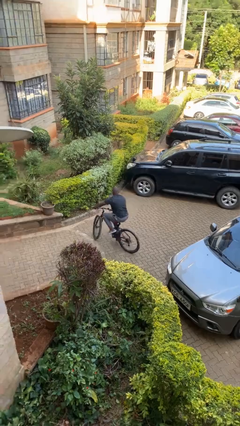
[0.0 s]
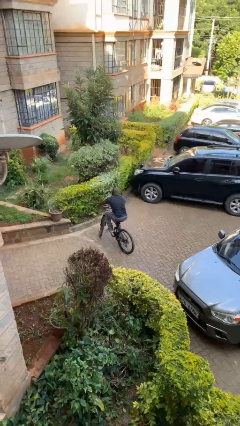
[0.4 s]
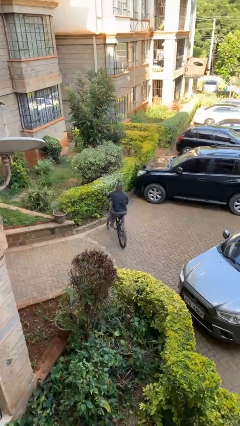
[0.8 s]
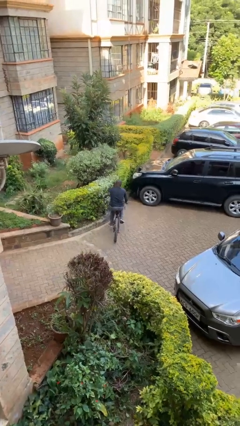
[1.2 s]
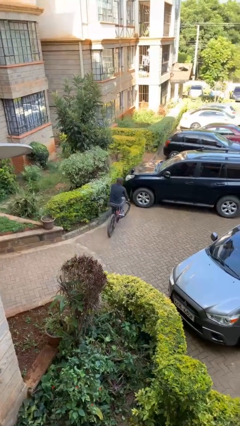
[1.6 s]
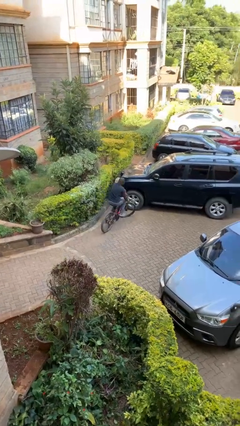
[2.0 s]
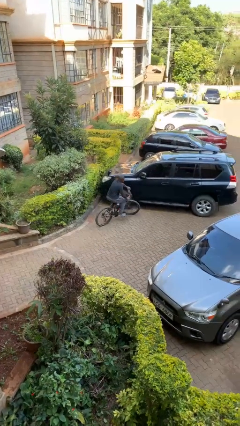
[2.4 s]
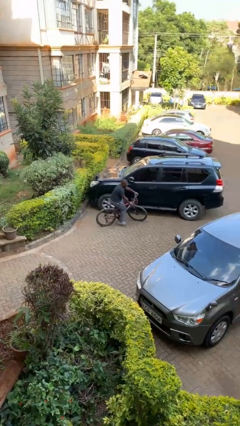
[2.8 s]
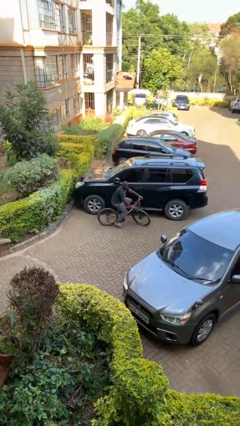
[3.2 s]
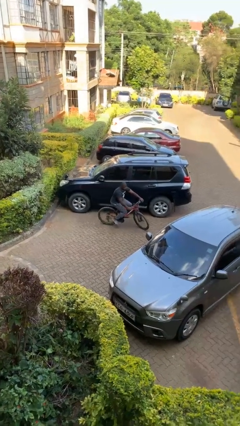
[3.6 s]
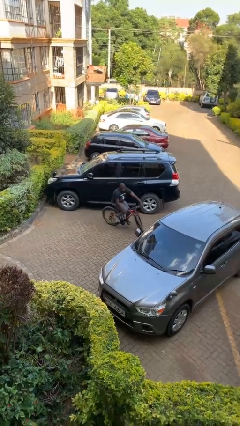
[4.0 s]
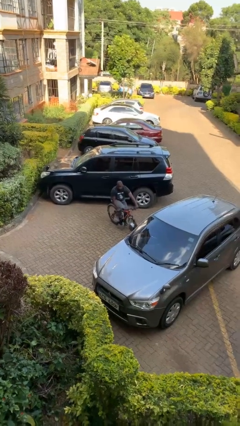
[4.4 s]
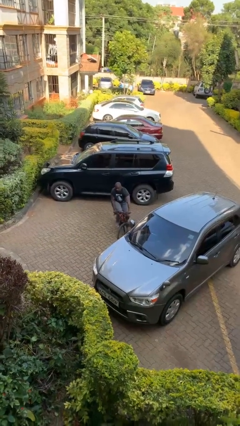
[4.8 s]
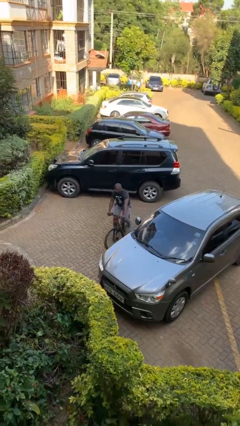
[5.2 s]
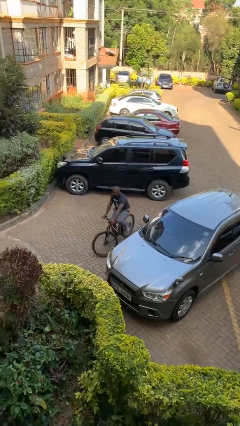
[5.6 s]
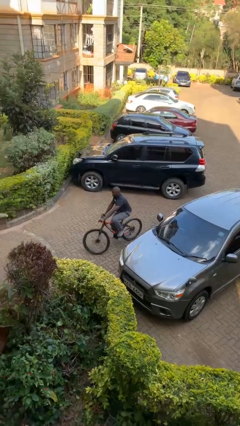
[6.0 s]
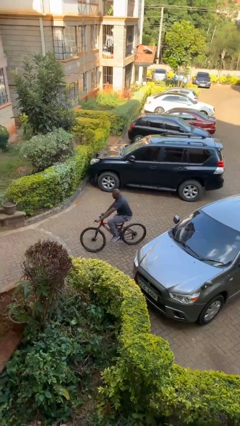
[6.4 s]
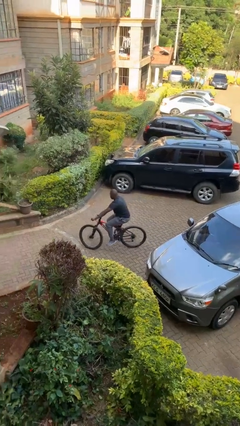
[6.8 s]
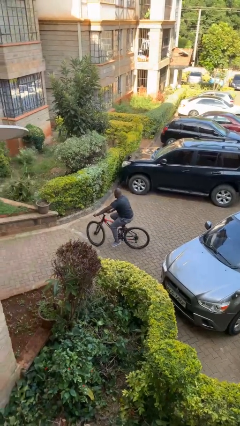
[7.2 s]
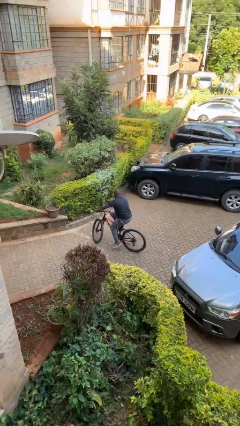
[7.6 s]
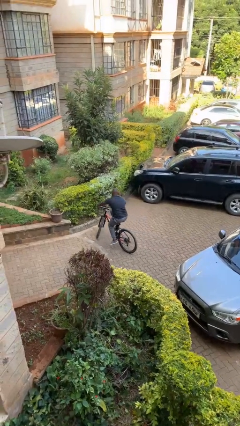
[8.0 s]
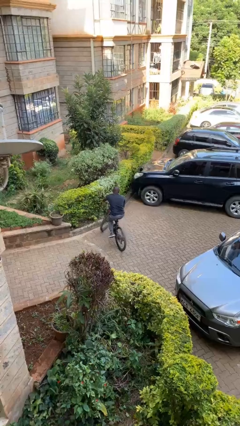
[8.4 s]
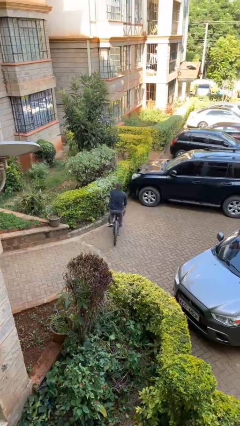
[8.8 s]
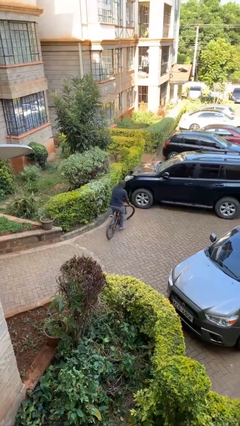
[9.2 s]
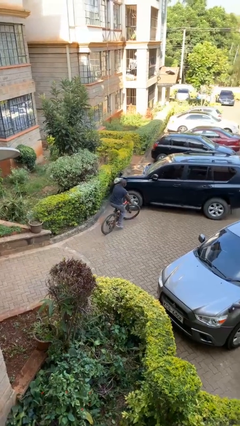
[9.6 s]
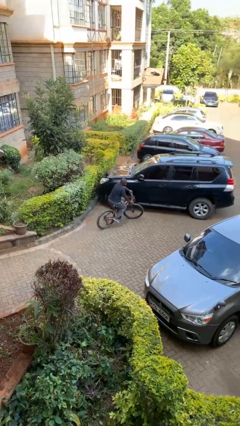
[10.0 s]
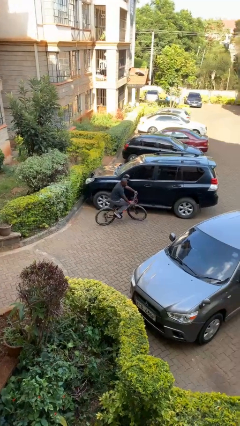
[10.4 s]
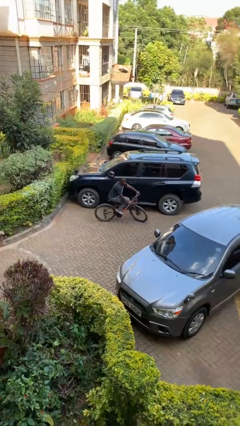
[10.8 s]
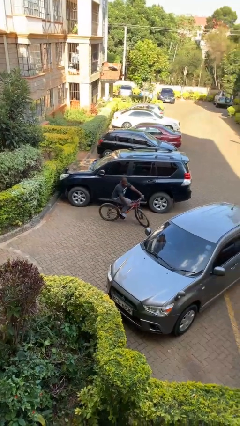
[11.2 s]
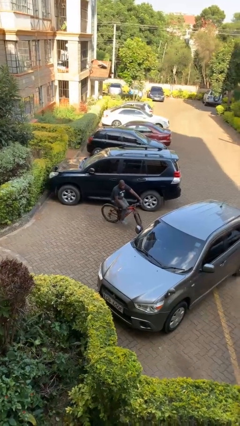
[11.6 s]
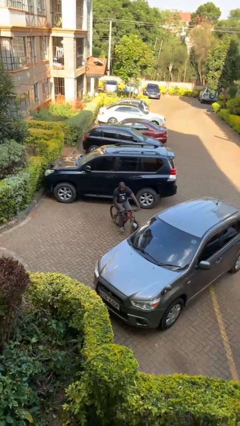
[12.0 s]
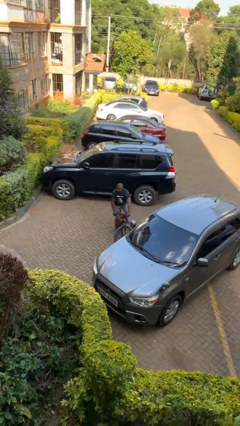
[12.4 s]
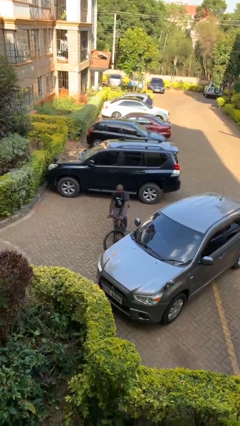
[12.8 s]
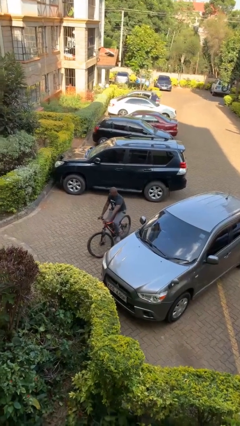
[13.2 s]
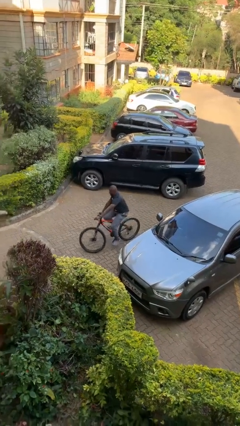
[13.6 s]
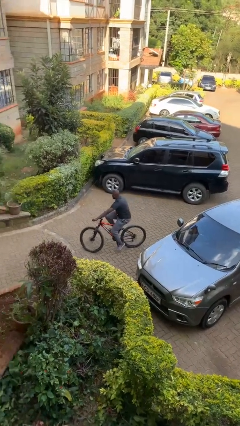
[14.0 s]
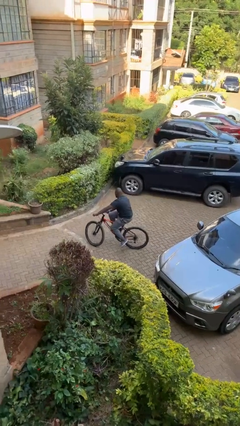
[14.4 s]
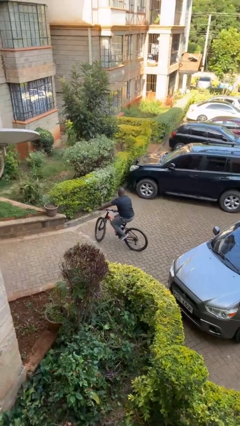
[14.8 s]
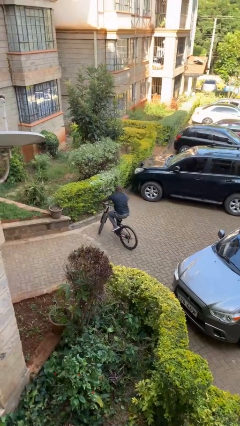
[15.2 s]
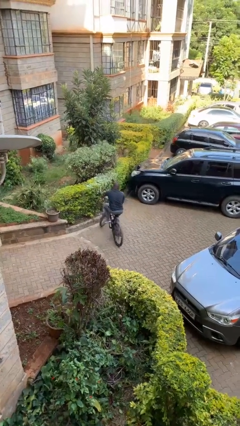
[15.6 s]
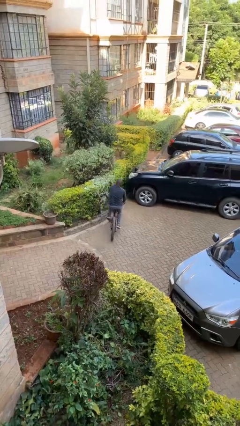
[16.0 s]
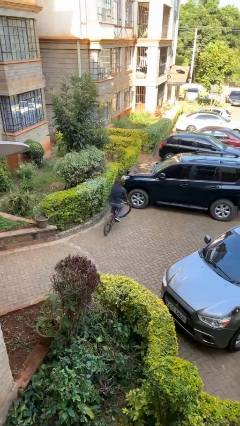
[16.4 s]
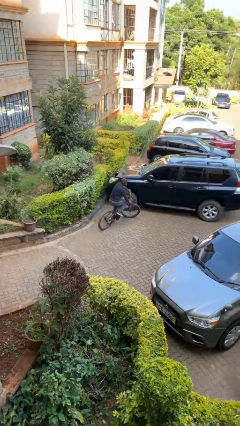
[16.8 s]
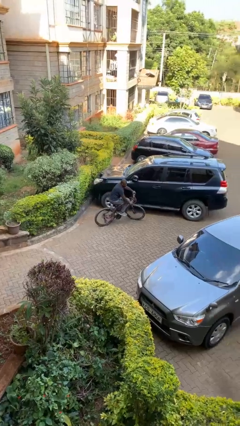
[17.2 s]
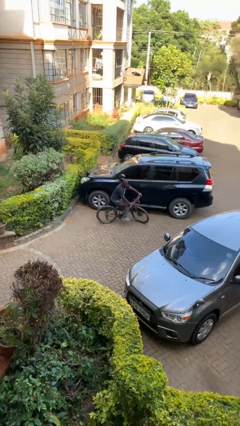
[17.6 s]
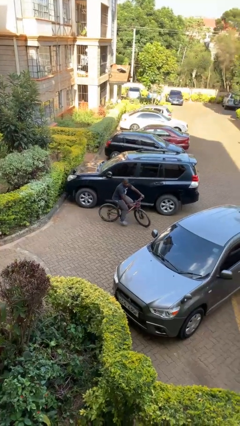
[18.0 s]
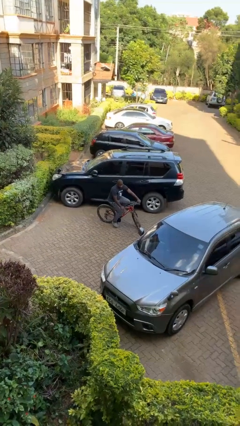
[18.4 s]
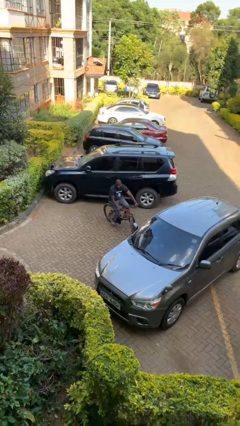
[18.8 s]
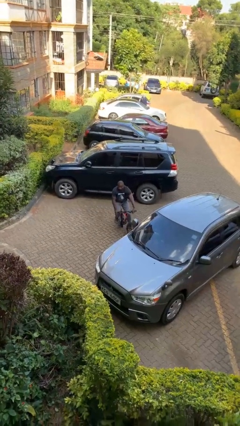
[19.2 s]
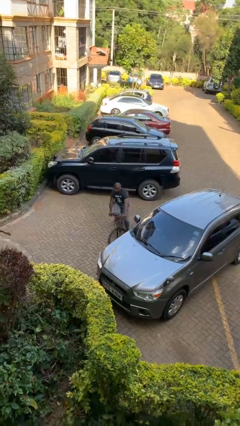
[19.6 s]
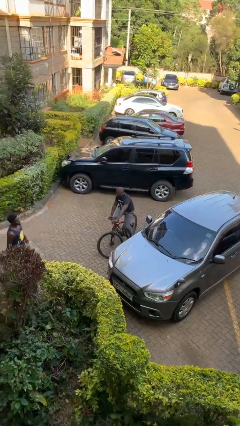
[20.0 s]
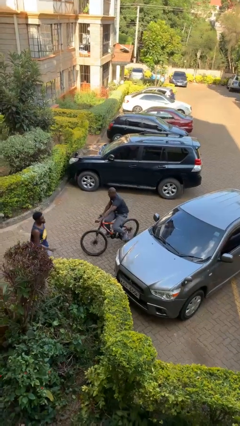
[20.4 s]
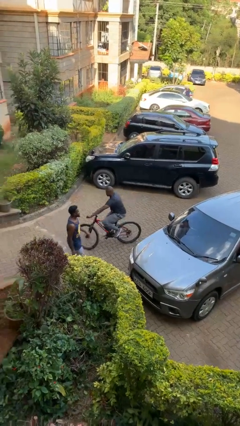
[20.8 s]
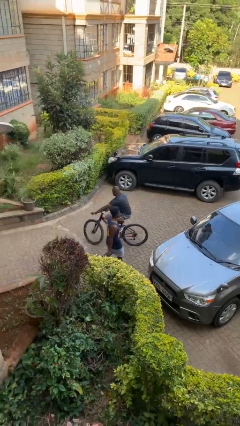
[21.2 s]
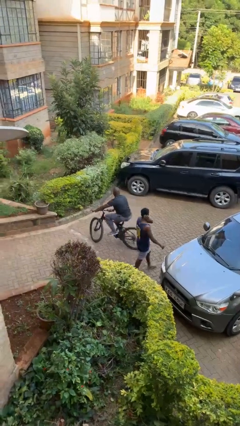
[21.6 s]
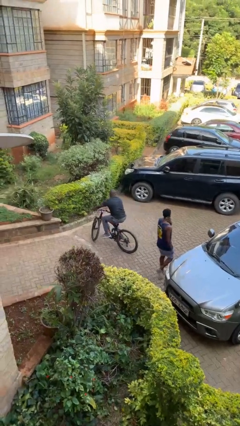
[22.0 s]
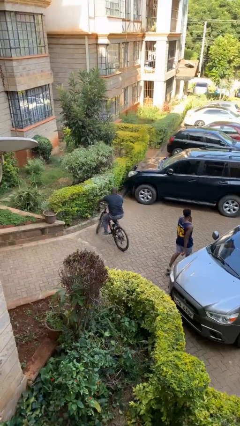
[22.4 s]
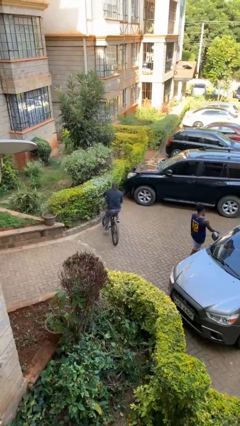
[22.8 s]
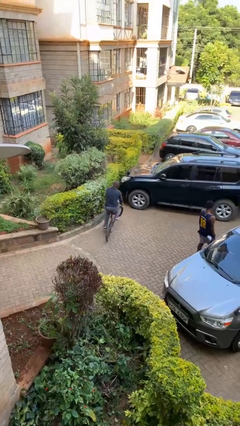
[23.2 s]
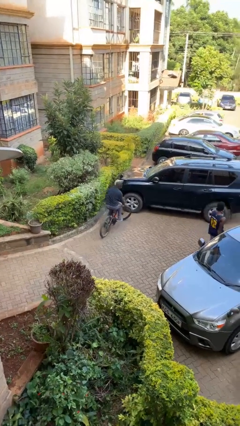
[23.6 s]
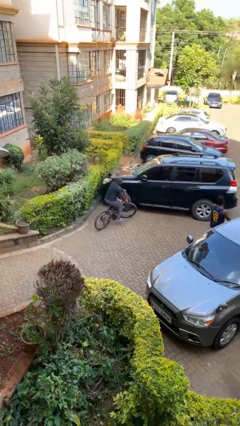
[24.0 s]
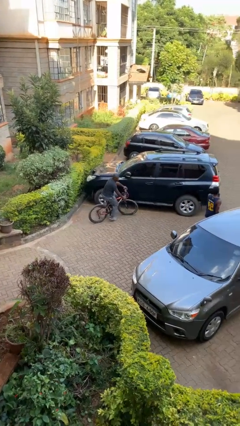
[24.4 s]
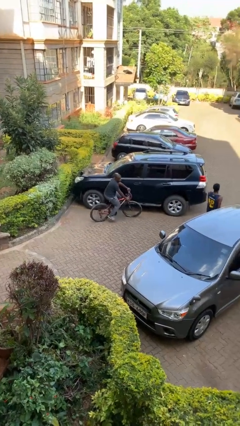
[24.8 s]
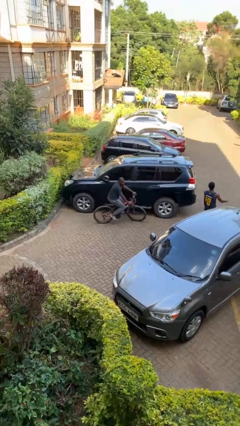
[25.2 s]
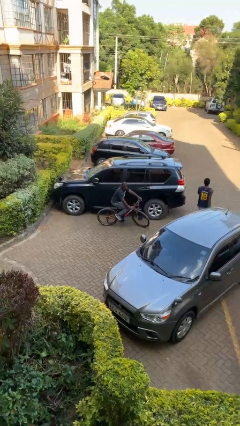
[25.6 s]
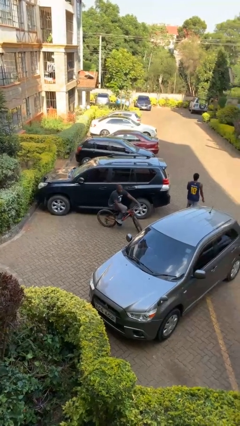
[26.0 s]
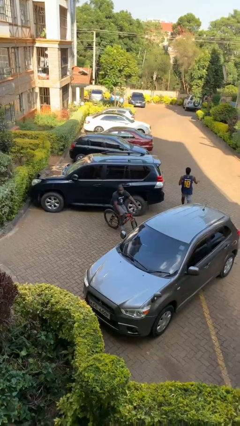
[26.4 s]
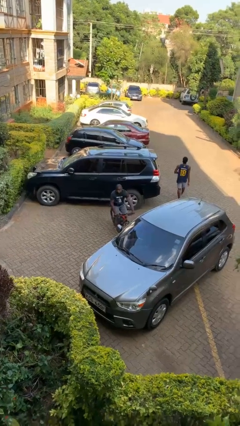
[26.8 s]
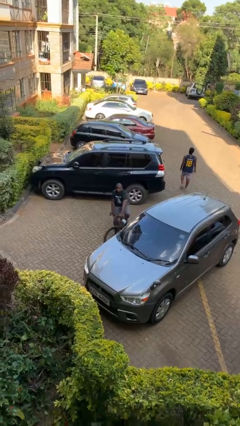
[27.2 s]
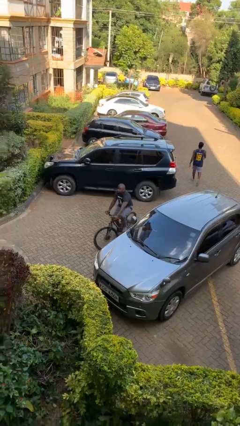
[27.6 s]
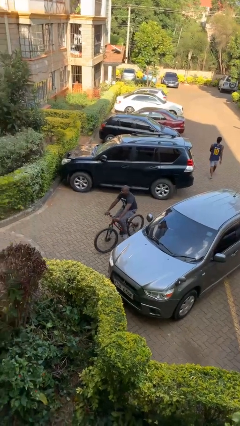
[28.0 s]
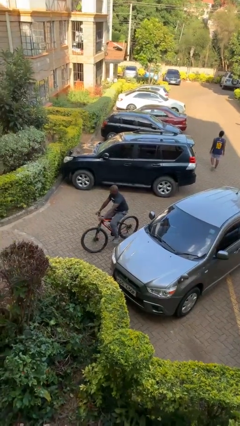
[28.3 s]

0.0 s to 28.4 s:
person rides bicycle

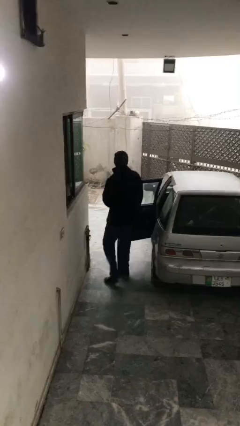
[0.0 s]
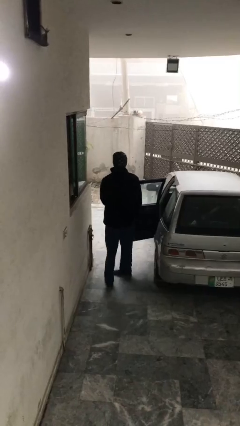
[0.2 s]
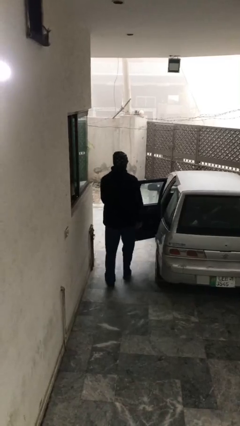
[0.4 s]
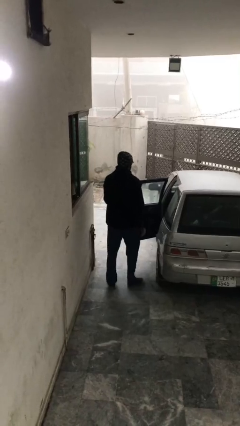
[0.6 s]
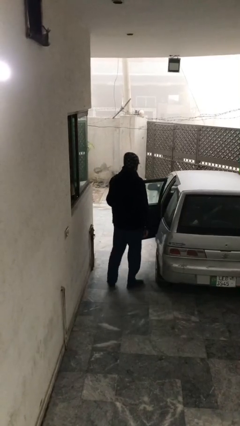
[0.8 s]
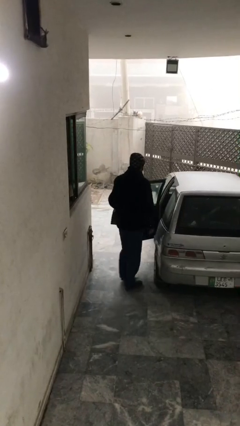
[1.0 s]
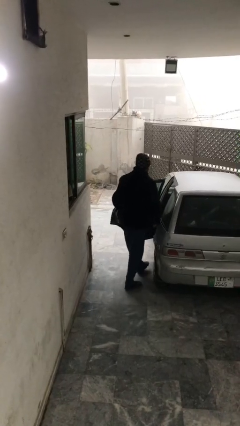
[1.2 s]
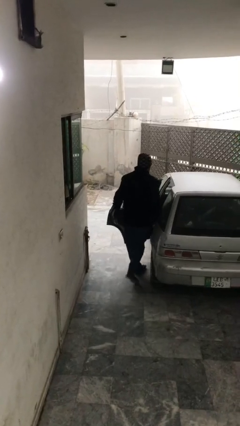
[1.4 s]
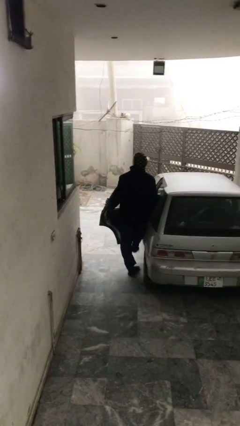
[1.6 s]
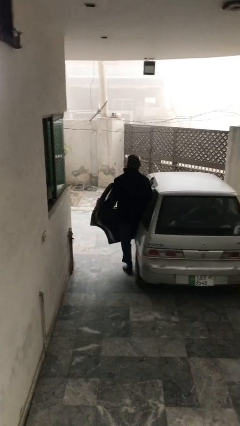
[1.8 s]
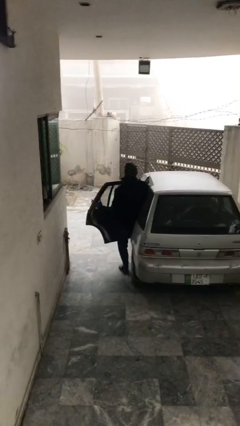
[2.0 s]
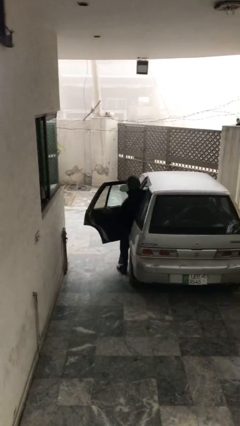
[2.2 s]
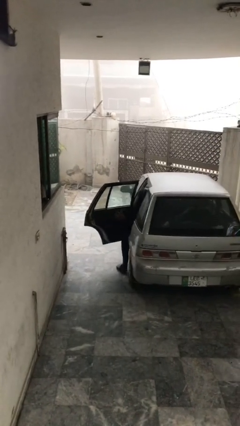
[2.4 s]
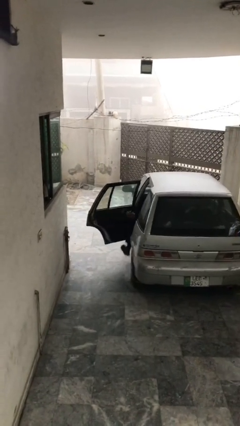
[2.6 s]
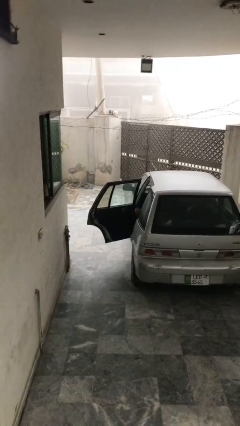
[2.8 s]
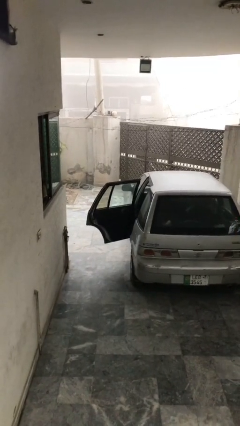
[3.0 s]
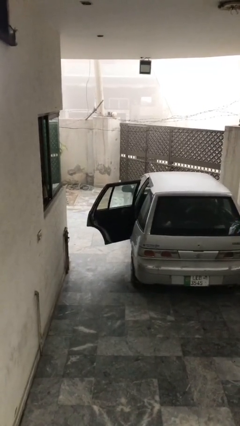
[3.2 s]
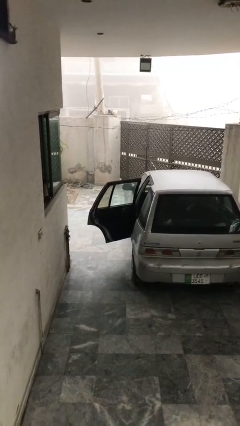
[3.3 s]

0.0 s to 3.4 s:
person enters car

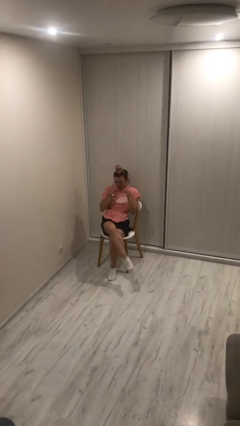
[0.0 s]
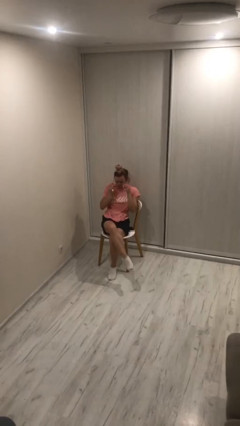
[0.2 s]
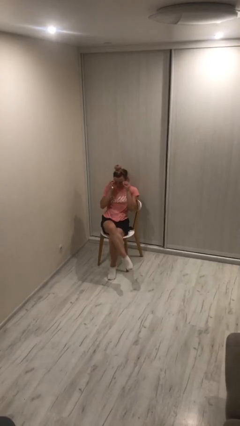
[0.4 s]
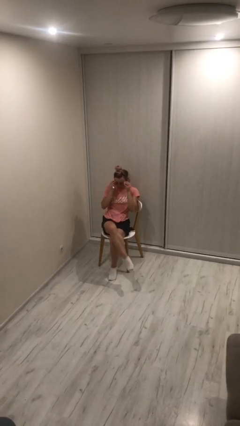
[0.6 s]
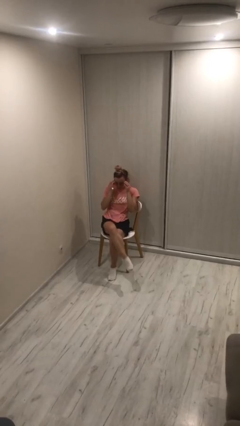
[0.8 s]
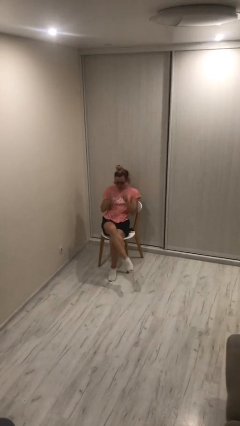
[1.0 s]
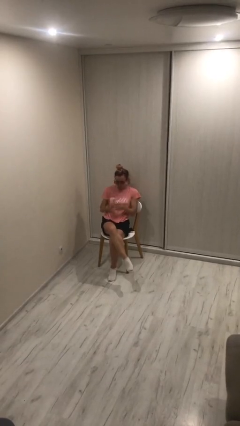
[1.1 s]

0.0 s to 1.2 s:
person puts on glasses
